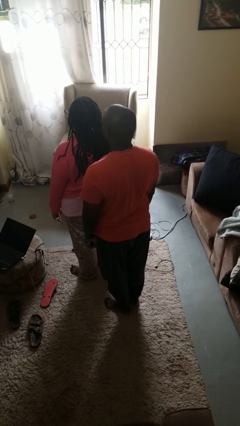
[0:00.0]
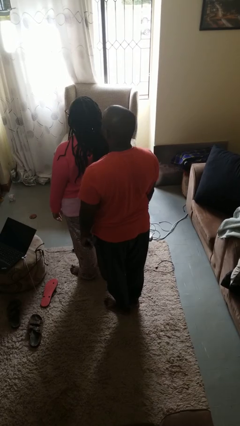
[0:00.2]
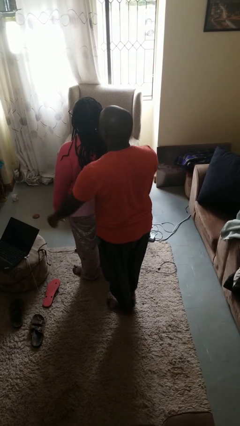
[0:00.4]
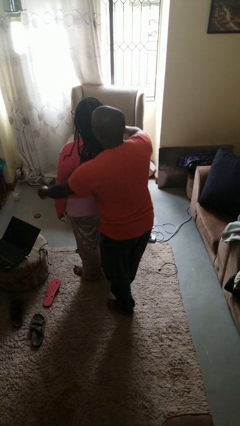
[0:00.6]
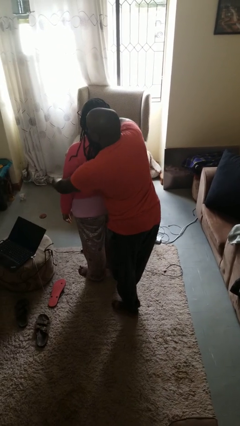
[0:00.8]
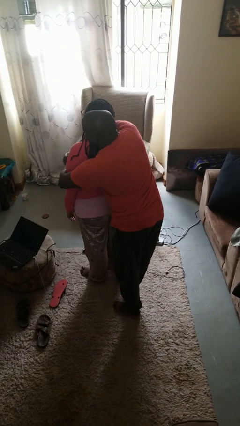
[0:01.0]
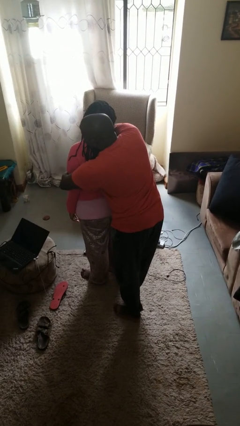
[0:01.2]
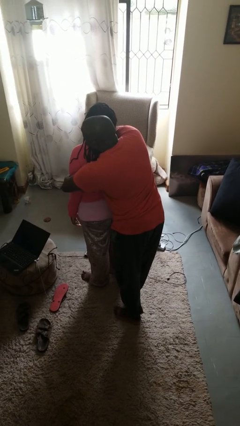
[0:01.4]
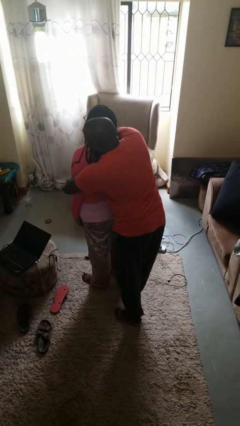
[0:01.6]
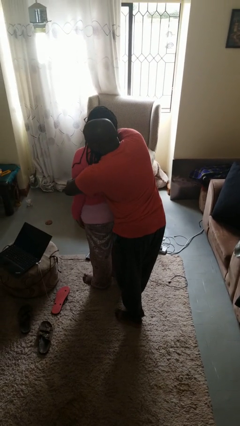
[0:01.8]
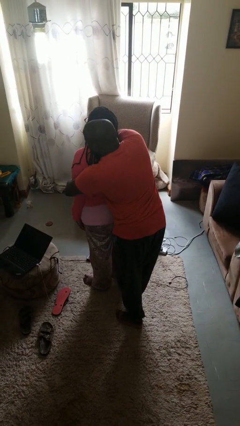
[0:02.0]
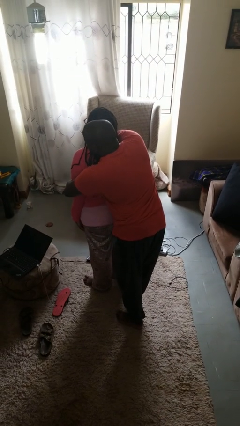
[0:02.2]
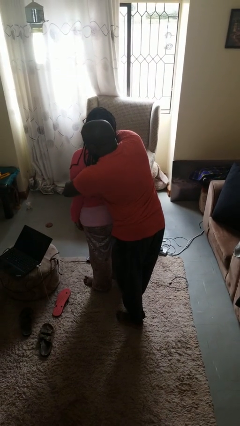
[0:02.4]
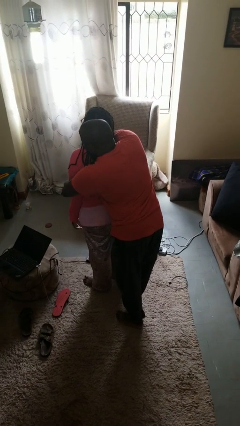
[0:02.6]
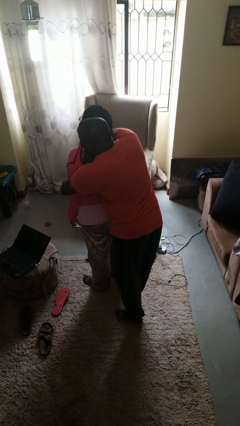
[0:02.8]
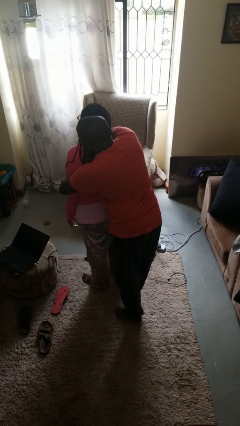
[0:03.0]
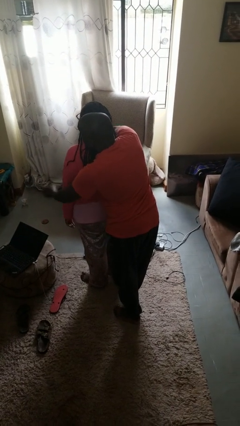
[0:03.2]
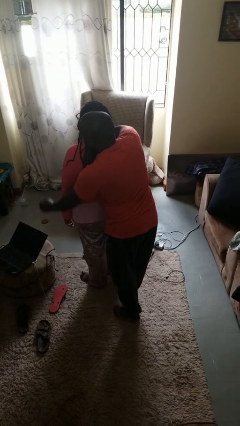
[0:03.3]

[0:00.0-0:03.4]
person hugs person from behind

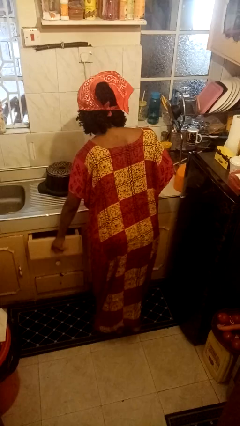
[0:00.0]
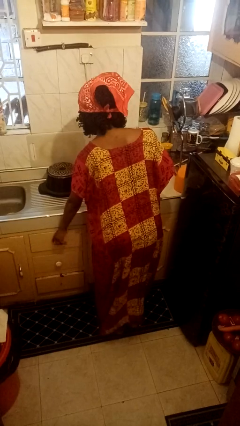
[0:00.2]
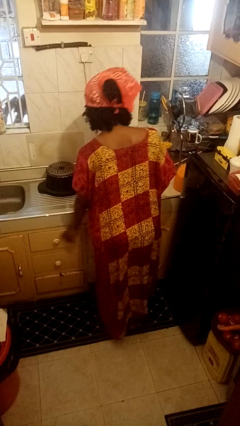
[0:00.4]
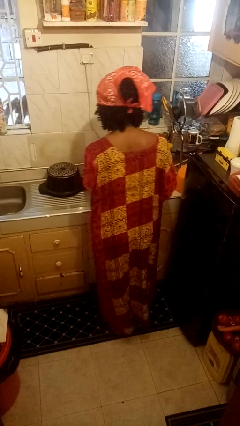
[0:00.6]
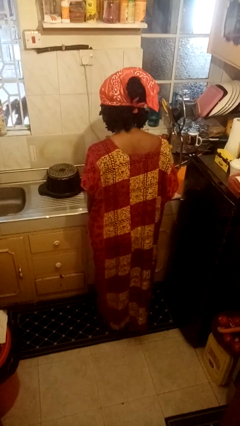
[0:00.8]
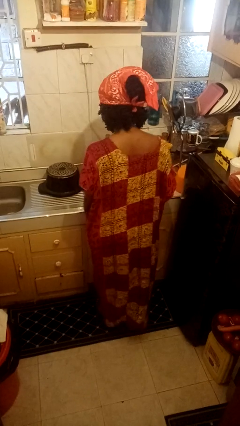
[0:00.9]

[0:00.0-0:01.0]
person closes kitchen drawer

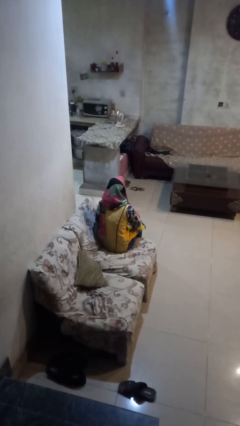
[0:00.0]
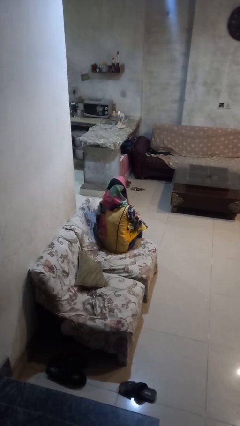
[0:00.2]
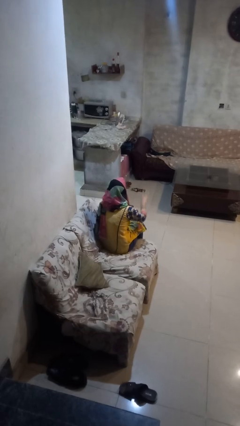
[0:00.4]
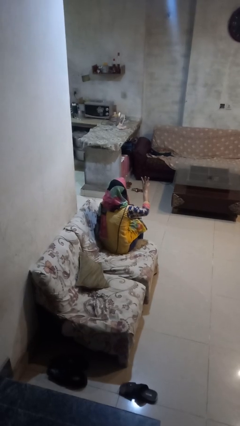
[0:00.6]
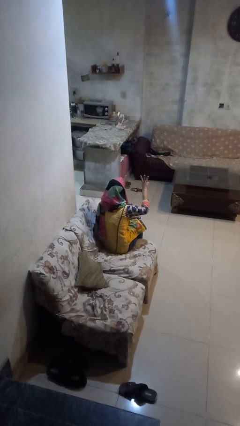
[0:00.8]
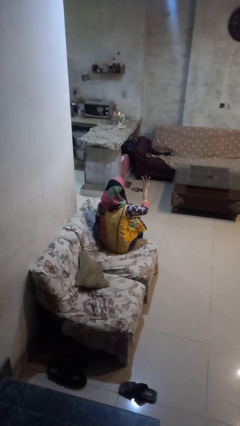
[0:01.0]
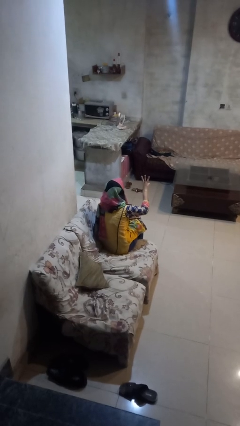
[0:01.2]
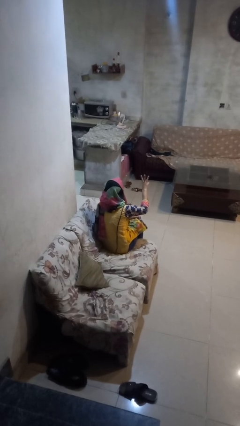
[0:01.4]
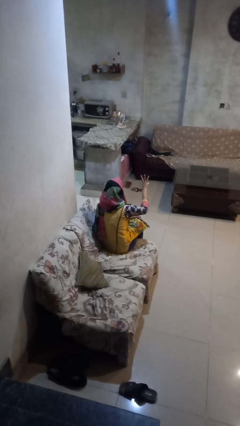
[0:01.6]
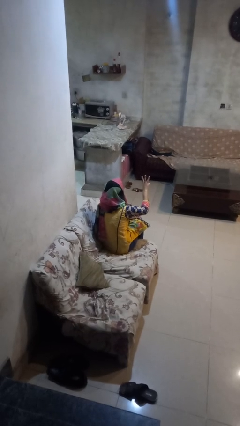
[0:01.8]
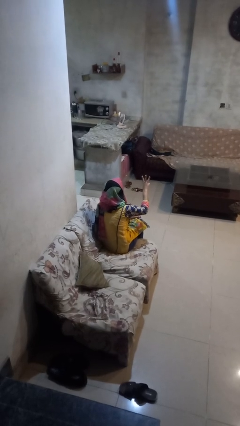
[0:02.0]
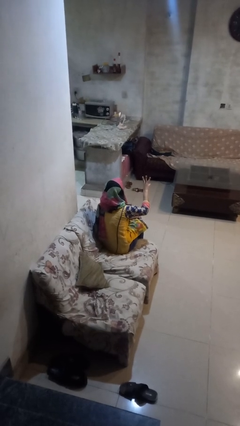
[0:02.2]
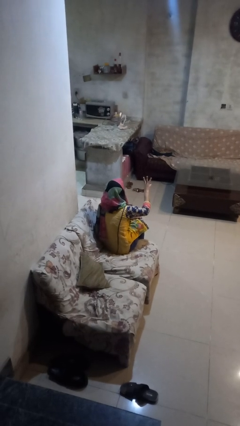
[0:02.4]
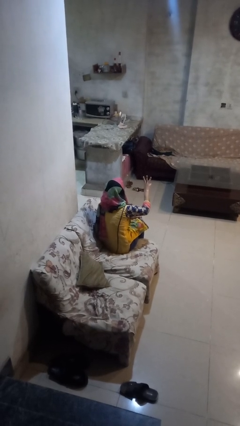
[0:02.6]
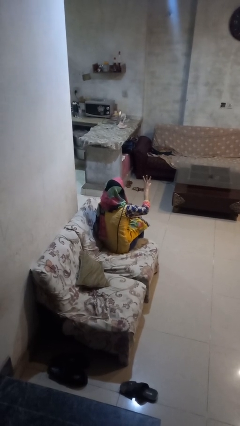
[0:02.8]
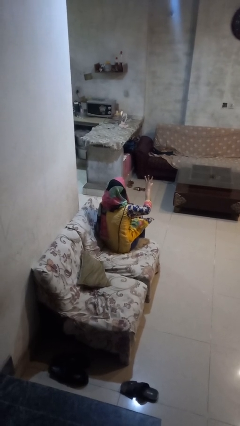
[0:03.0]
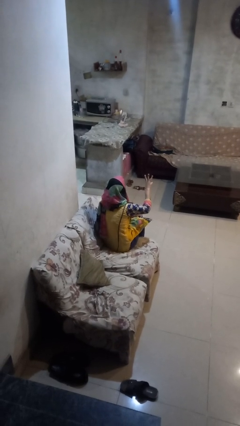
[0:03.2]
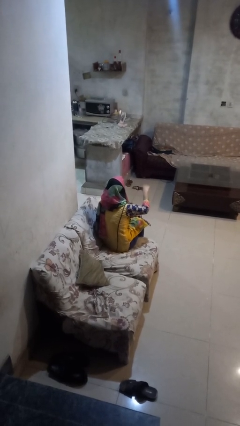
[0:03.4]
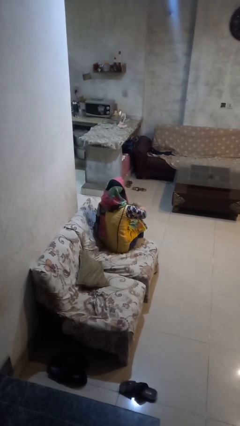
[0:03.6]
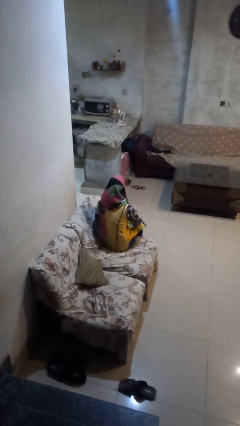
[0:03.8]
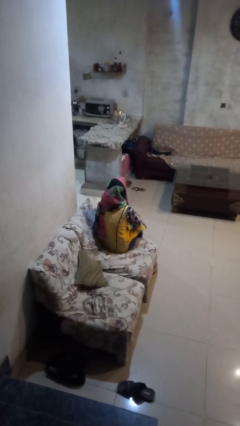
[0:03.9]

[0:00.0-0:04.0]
person gestures number three

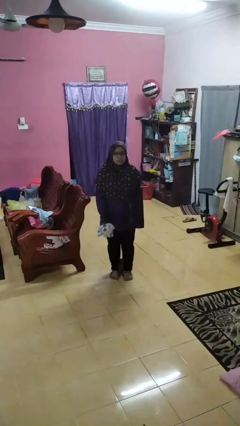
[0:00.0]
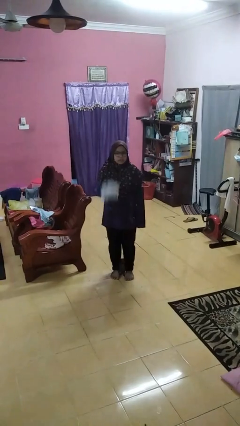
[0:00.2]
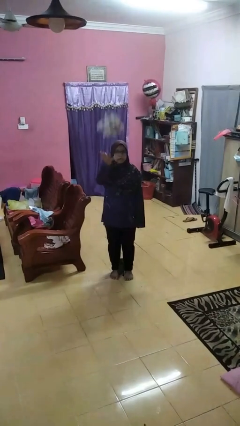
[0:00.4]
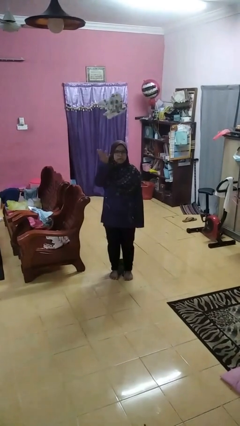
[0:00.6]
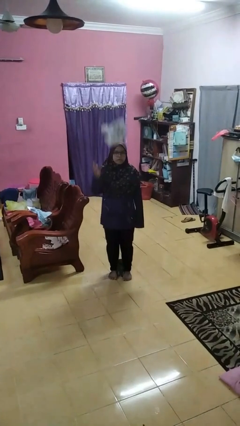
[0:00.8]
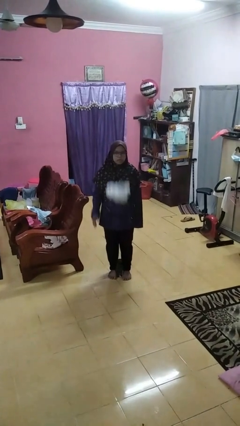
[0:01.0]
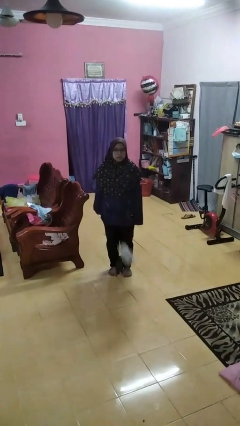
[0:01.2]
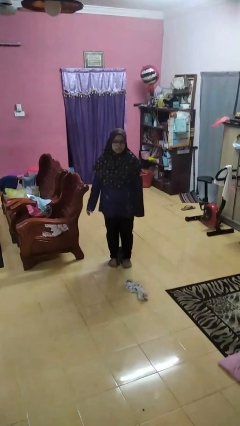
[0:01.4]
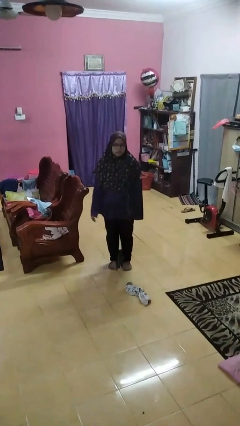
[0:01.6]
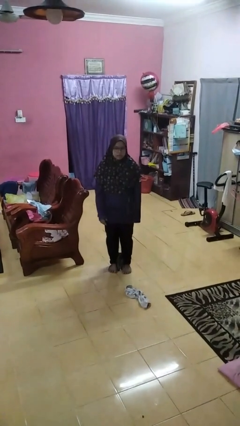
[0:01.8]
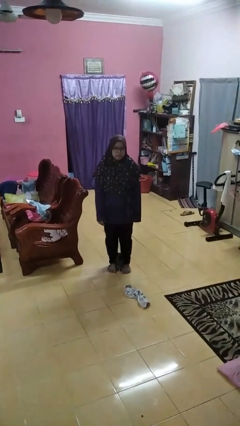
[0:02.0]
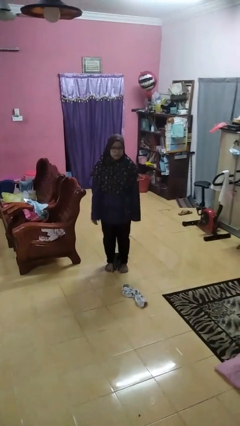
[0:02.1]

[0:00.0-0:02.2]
person throws object into air

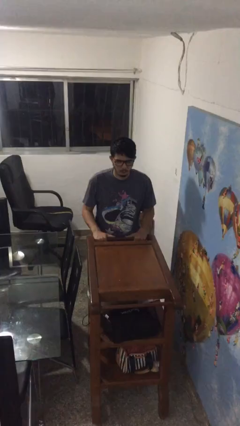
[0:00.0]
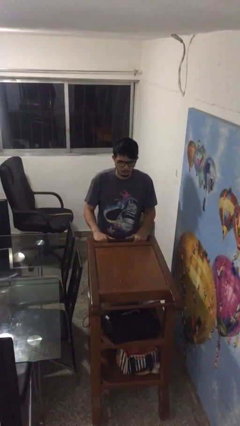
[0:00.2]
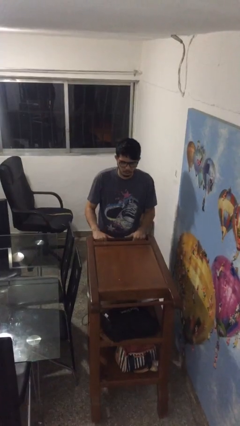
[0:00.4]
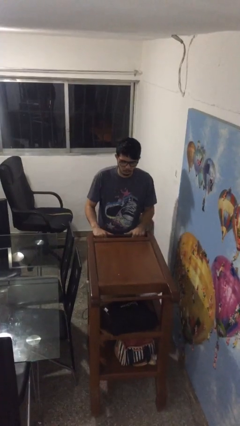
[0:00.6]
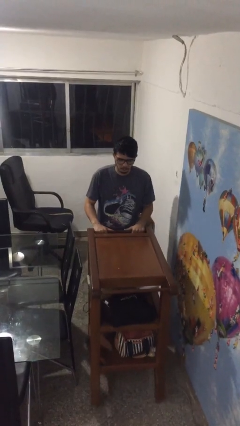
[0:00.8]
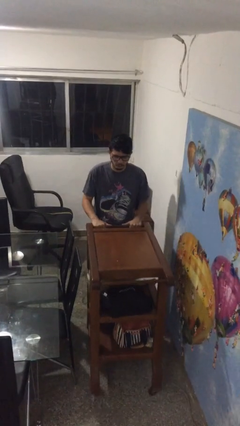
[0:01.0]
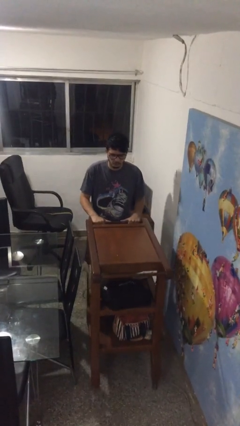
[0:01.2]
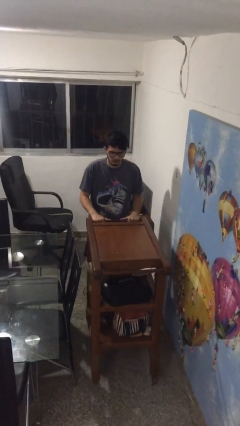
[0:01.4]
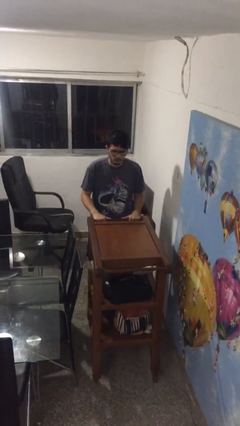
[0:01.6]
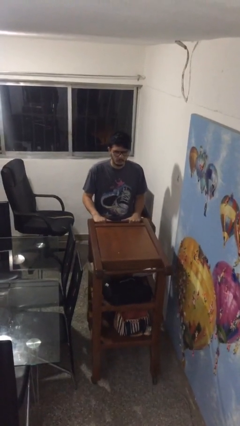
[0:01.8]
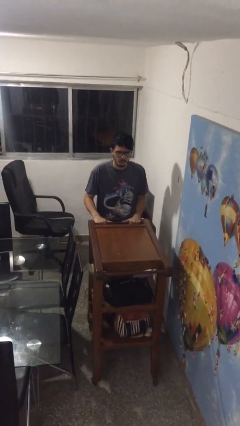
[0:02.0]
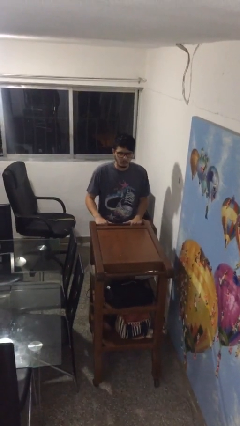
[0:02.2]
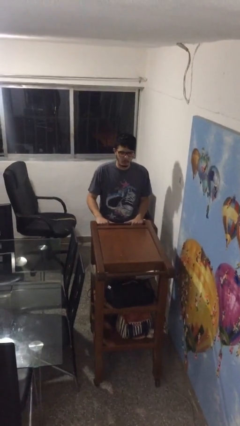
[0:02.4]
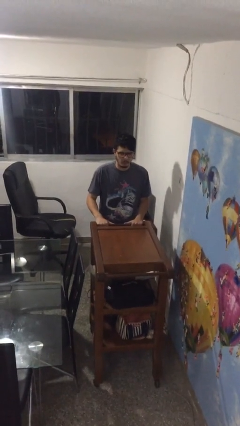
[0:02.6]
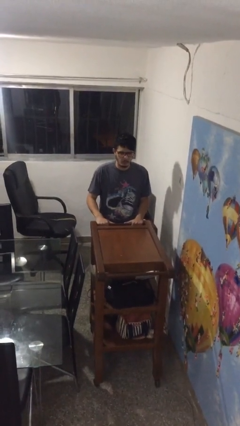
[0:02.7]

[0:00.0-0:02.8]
person pulls wheeled cart

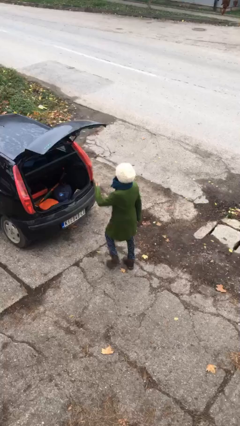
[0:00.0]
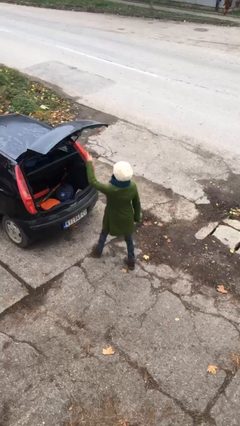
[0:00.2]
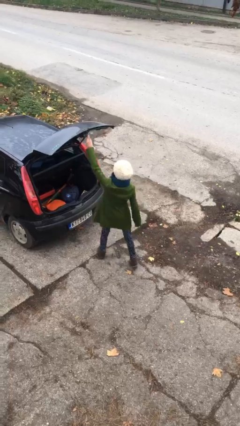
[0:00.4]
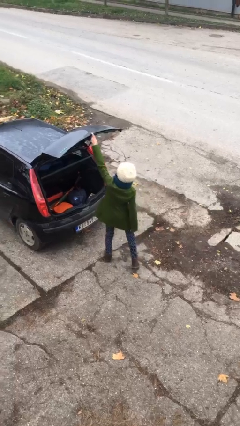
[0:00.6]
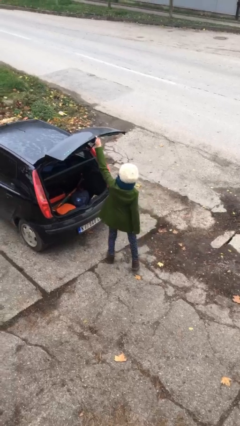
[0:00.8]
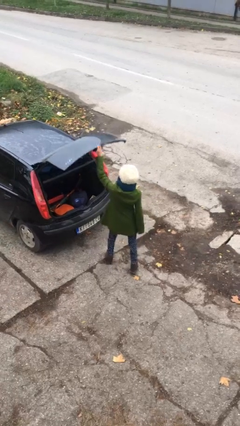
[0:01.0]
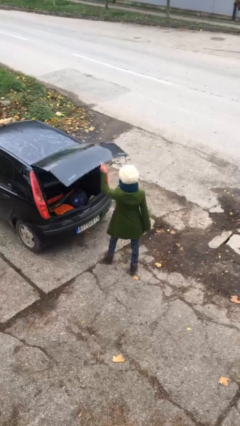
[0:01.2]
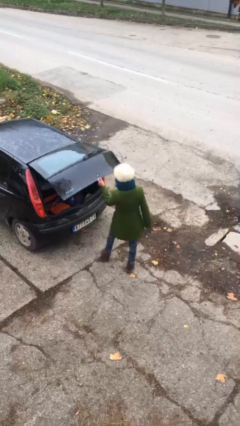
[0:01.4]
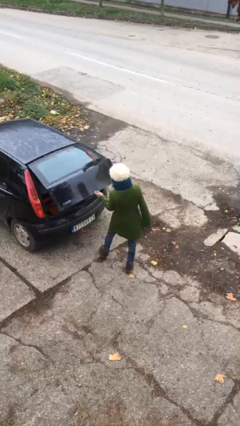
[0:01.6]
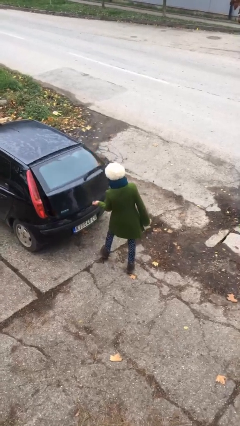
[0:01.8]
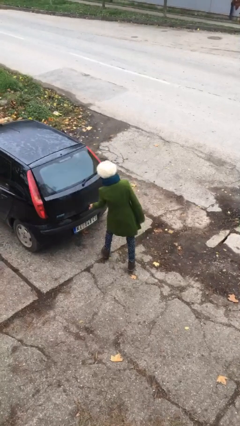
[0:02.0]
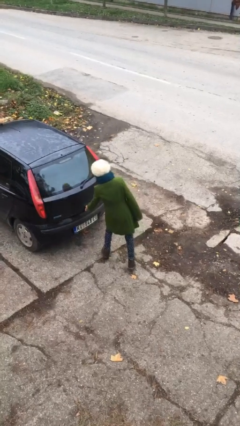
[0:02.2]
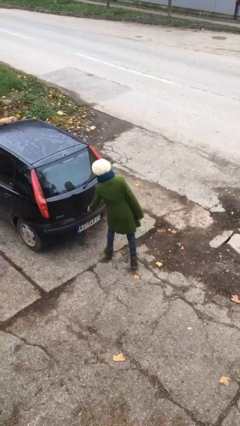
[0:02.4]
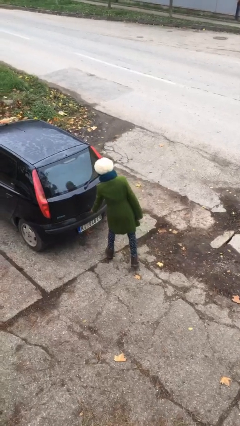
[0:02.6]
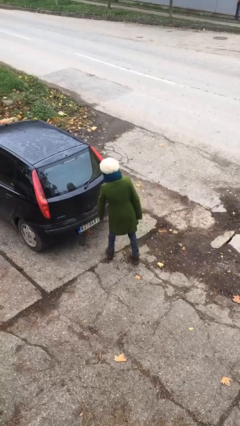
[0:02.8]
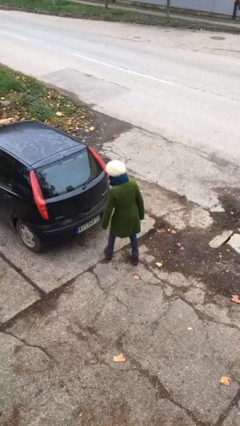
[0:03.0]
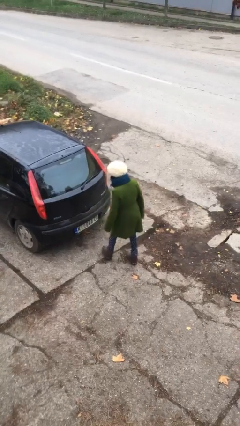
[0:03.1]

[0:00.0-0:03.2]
person closes car trunk

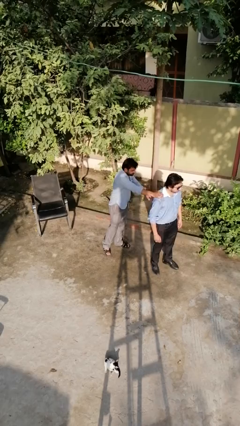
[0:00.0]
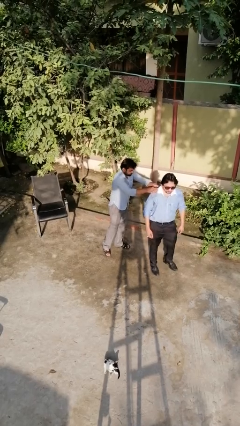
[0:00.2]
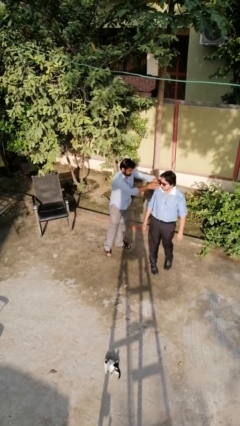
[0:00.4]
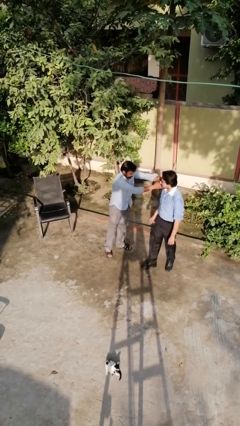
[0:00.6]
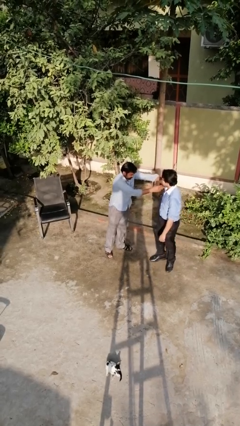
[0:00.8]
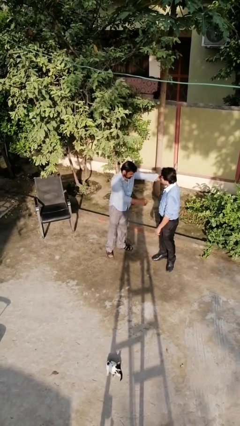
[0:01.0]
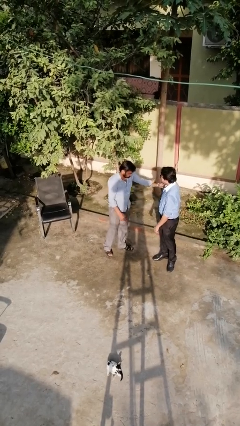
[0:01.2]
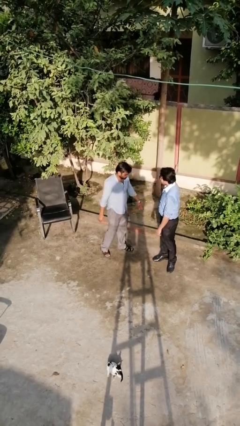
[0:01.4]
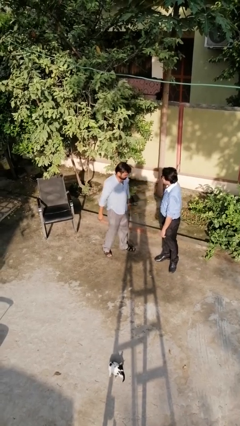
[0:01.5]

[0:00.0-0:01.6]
person spins person around
